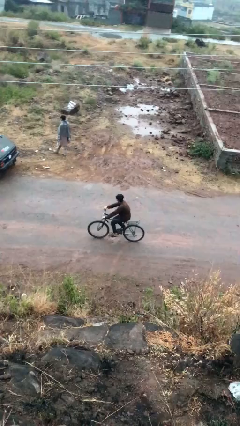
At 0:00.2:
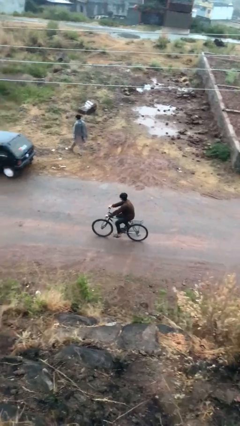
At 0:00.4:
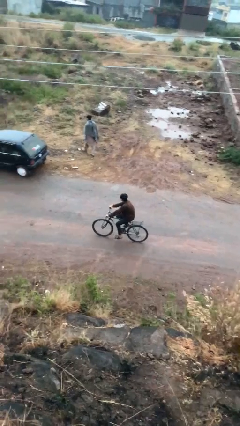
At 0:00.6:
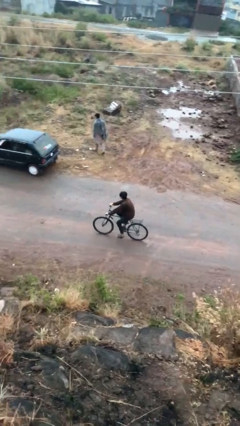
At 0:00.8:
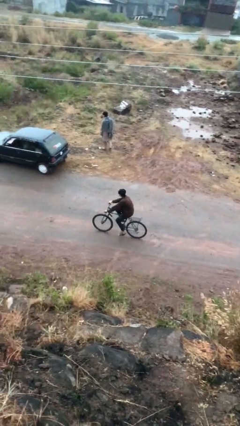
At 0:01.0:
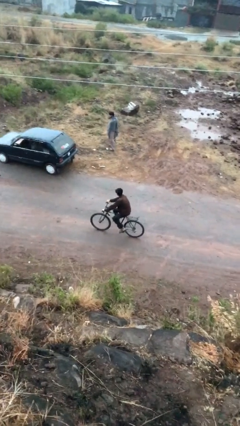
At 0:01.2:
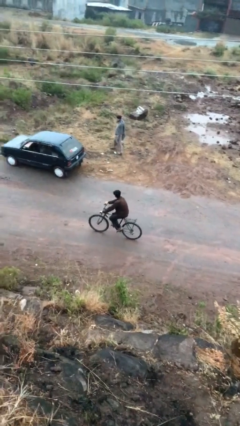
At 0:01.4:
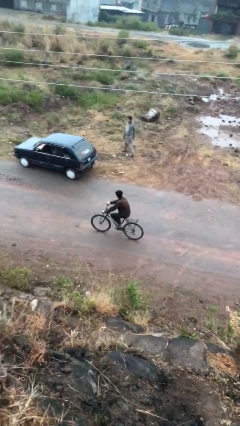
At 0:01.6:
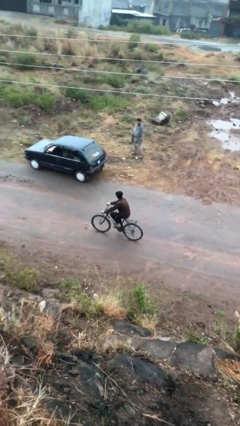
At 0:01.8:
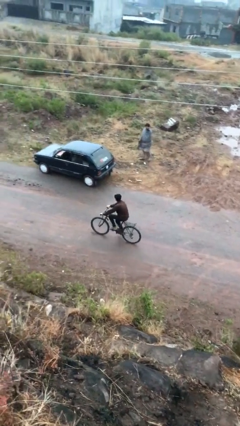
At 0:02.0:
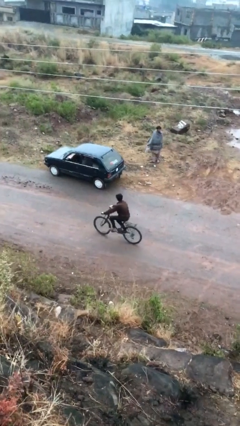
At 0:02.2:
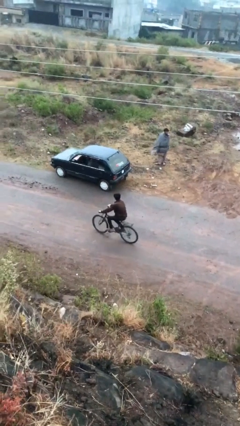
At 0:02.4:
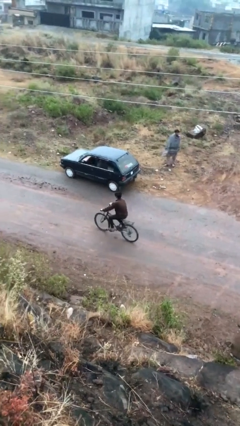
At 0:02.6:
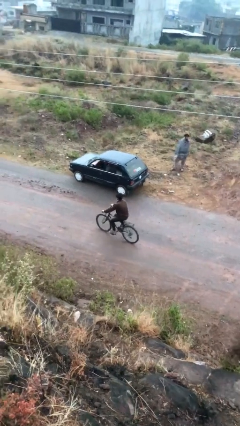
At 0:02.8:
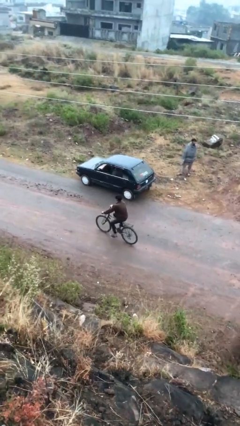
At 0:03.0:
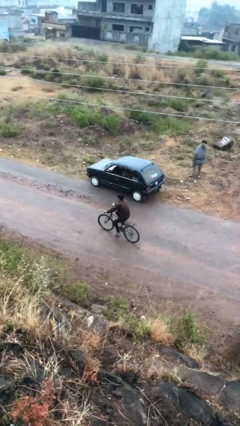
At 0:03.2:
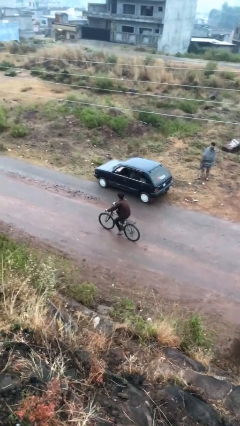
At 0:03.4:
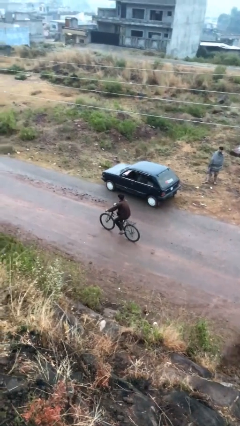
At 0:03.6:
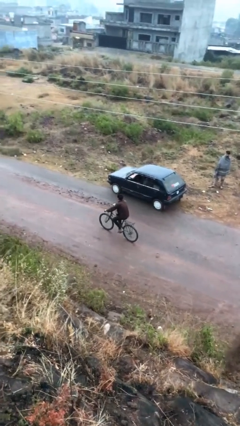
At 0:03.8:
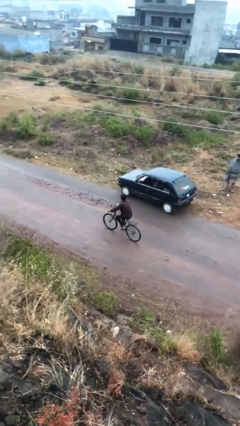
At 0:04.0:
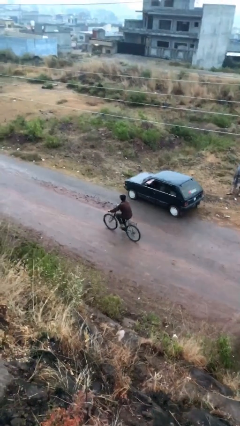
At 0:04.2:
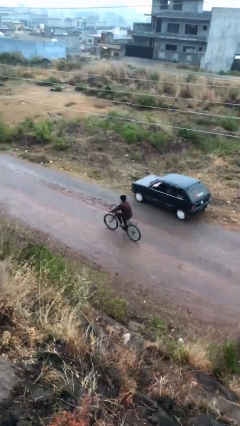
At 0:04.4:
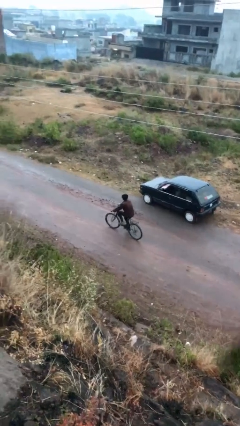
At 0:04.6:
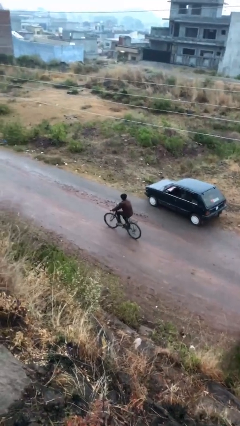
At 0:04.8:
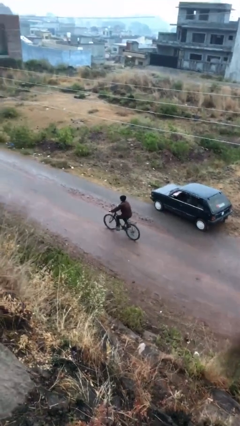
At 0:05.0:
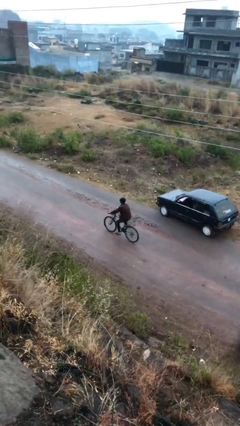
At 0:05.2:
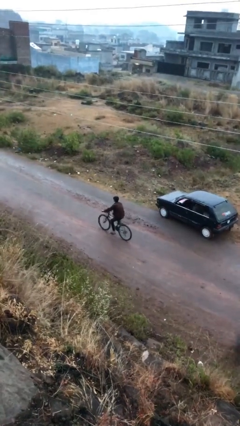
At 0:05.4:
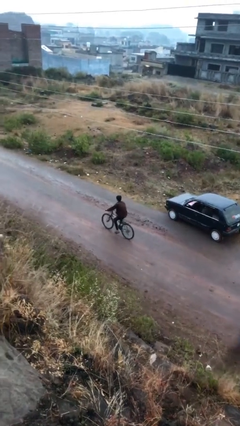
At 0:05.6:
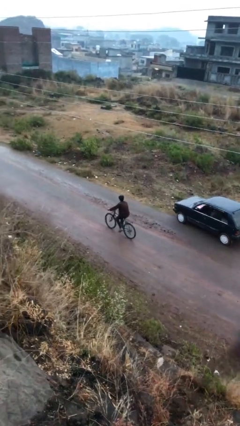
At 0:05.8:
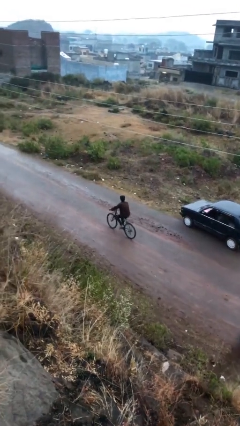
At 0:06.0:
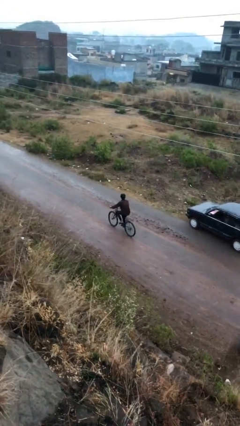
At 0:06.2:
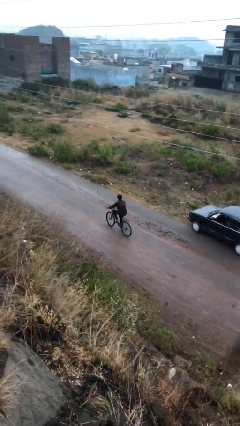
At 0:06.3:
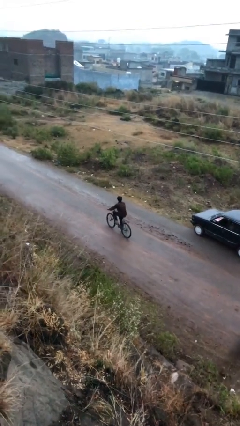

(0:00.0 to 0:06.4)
person rides bicycle

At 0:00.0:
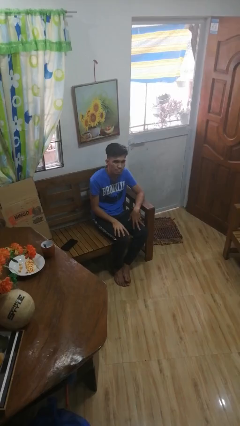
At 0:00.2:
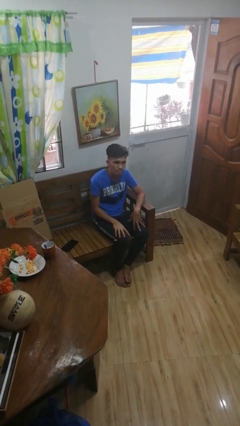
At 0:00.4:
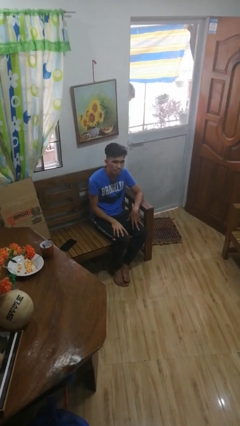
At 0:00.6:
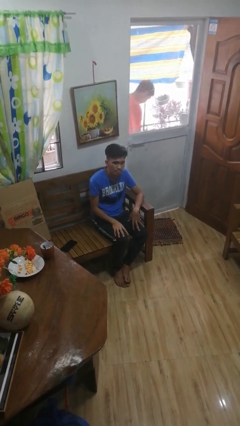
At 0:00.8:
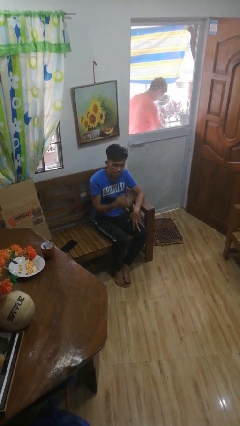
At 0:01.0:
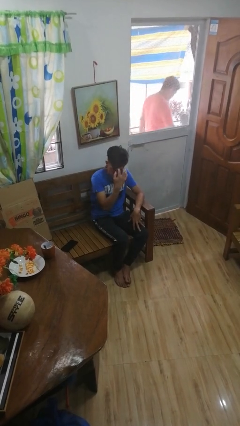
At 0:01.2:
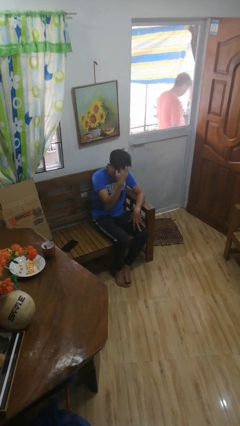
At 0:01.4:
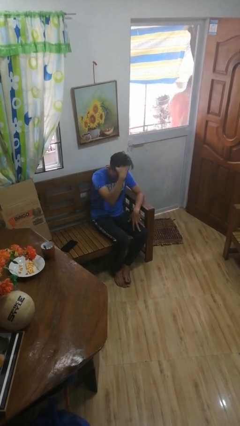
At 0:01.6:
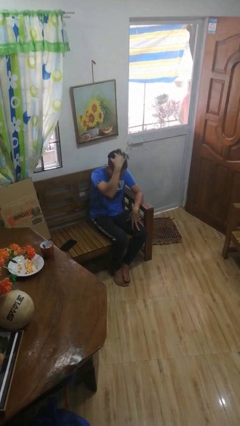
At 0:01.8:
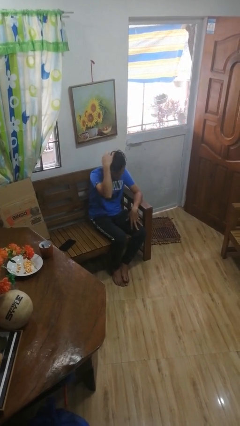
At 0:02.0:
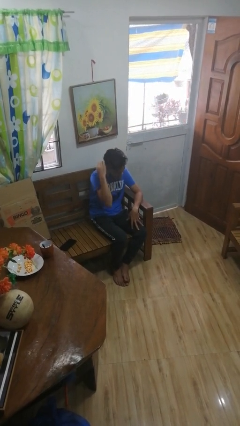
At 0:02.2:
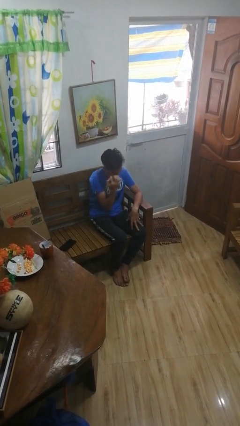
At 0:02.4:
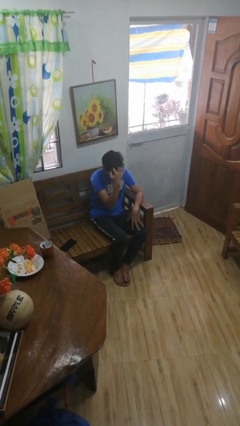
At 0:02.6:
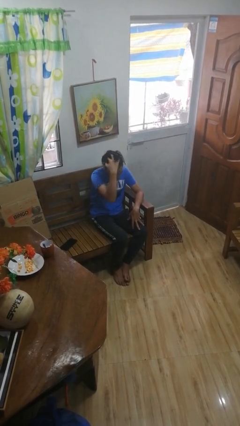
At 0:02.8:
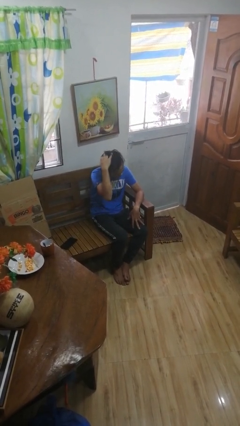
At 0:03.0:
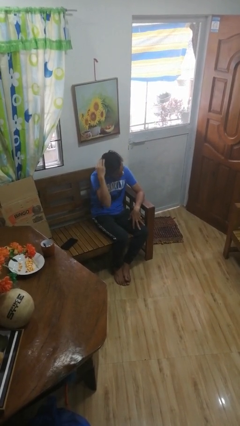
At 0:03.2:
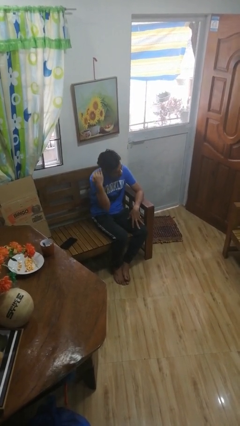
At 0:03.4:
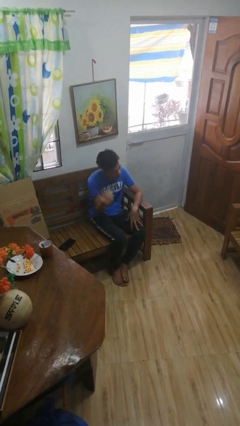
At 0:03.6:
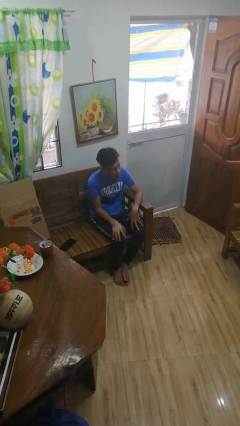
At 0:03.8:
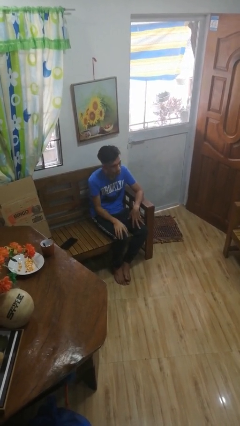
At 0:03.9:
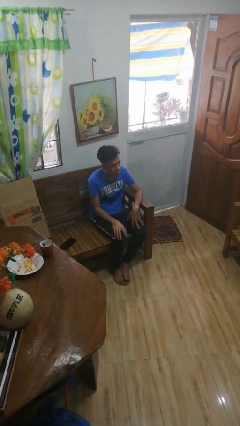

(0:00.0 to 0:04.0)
person strokes hair

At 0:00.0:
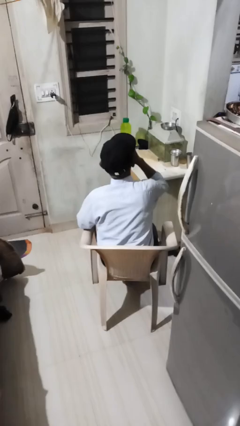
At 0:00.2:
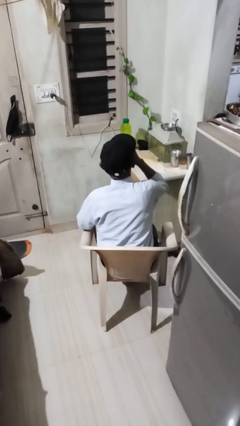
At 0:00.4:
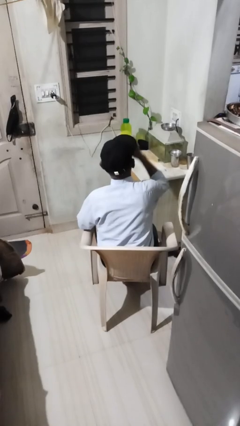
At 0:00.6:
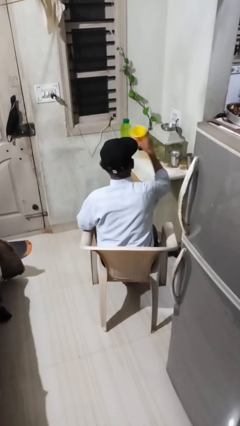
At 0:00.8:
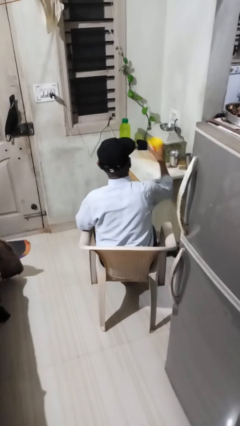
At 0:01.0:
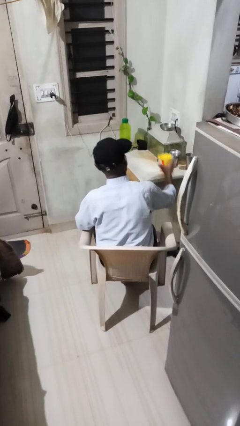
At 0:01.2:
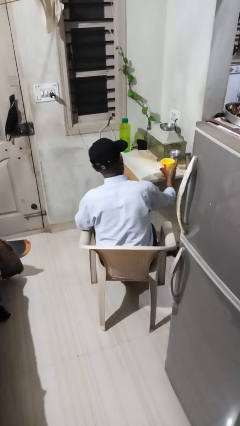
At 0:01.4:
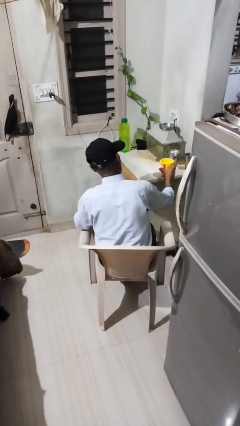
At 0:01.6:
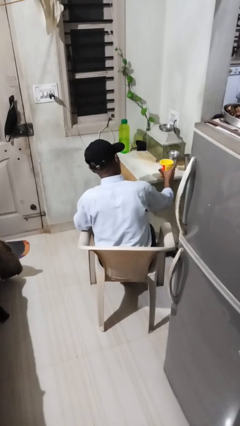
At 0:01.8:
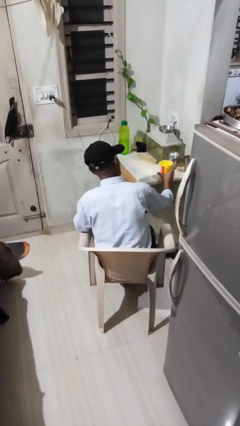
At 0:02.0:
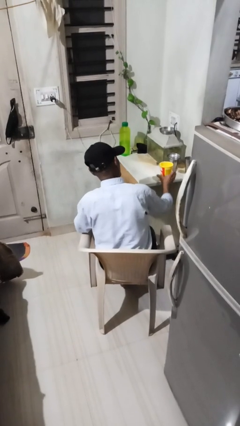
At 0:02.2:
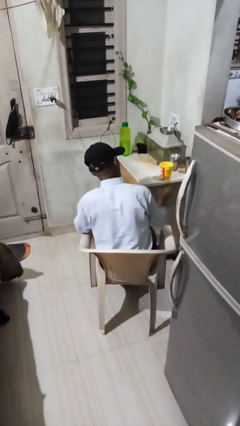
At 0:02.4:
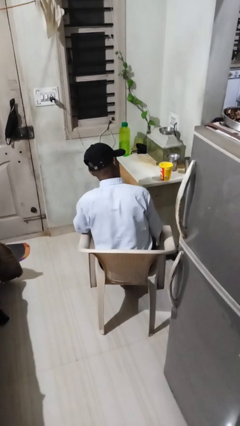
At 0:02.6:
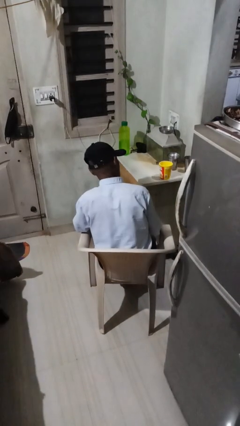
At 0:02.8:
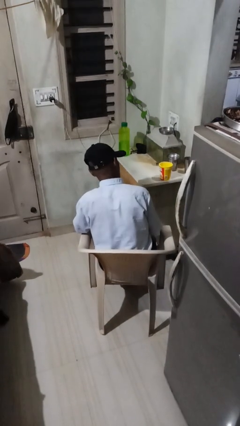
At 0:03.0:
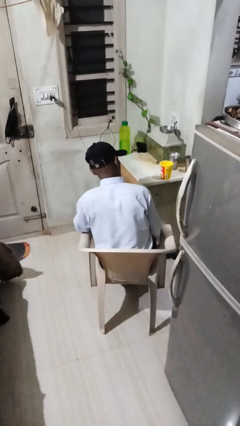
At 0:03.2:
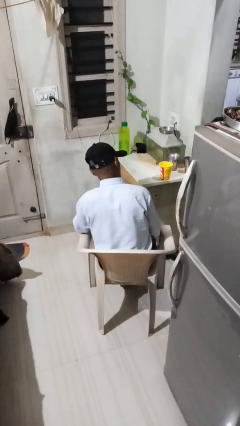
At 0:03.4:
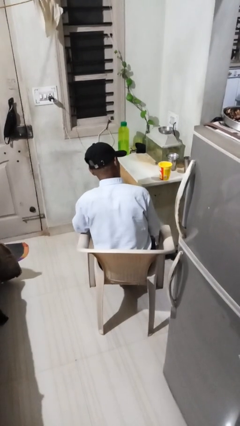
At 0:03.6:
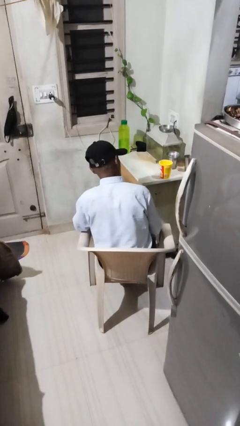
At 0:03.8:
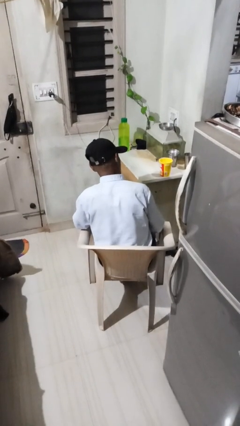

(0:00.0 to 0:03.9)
person puts down object on table

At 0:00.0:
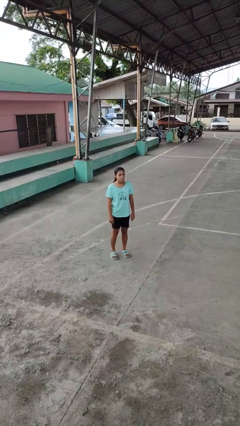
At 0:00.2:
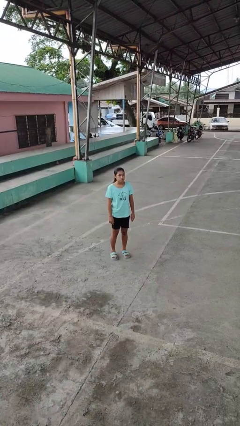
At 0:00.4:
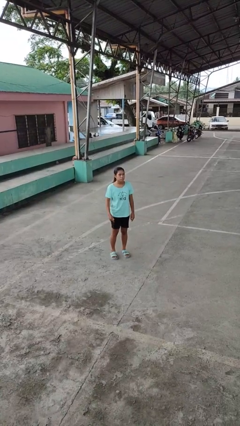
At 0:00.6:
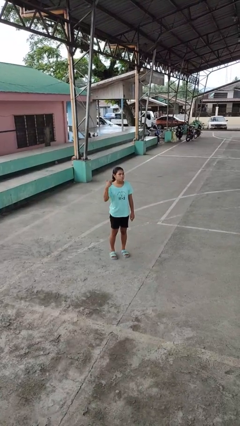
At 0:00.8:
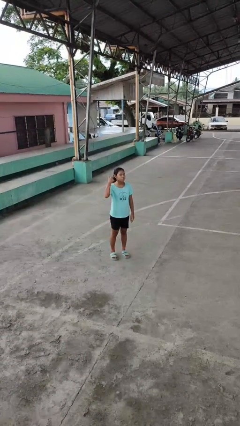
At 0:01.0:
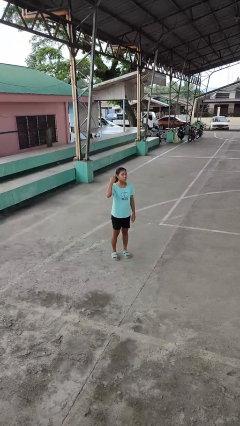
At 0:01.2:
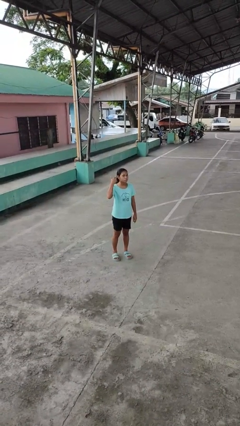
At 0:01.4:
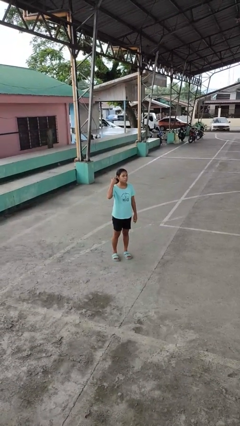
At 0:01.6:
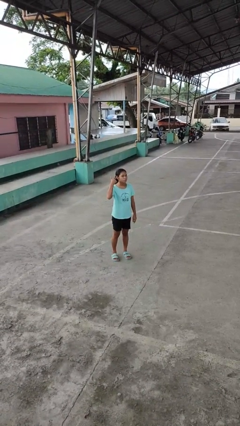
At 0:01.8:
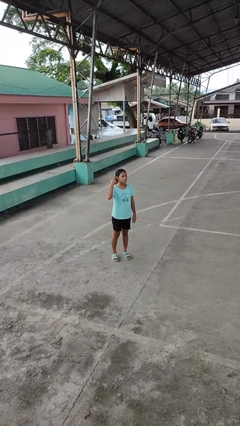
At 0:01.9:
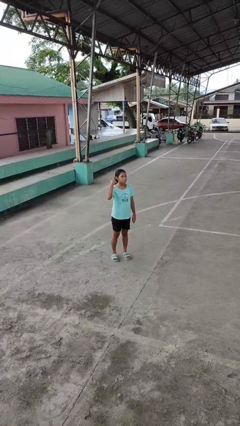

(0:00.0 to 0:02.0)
person gestures listen closely

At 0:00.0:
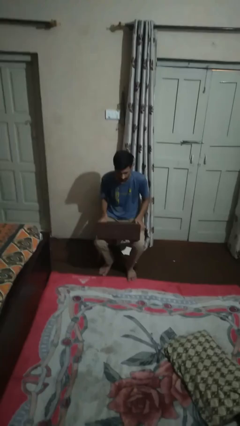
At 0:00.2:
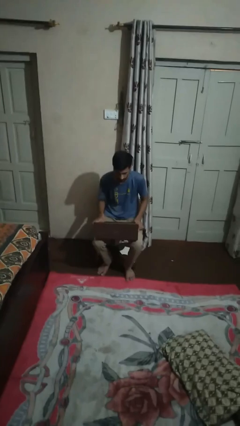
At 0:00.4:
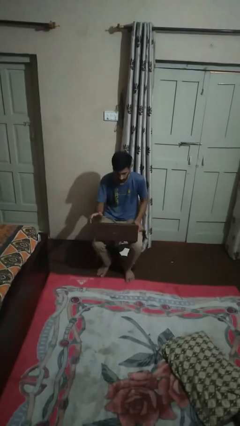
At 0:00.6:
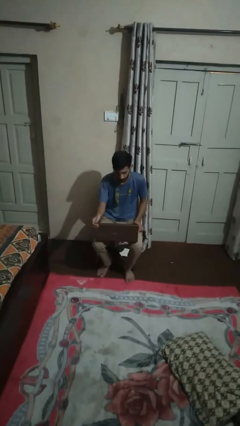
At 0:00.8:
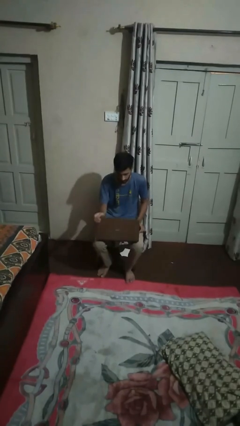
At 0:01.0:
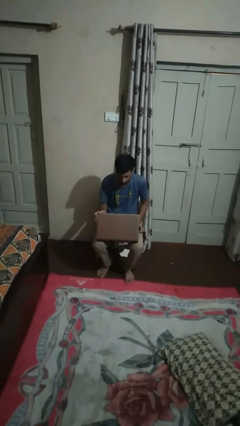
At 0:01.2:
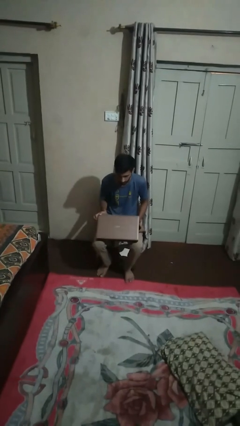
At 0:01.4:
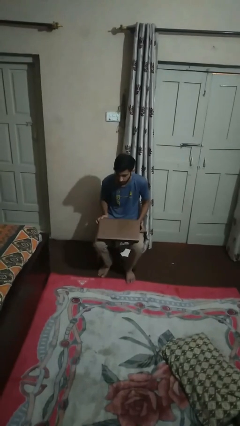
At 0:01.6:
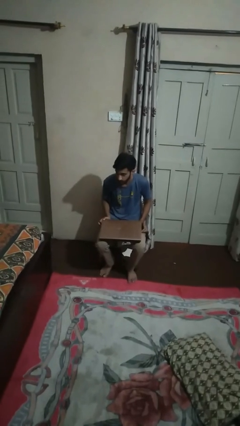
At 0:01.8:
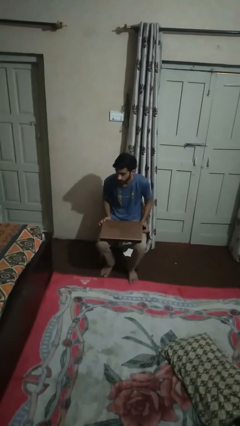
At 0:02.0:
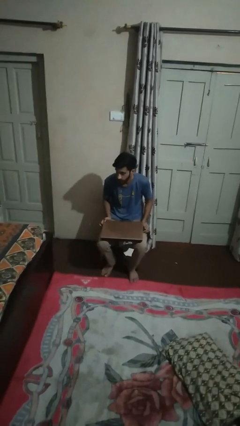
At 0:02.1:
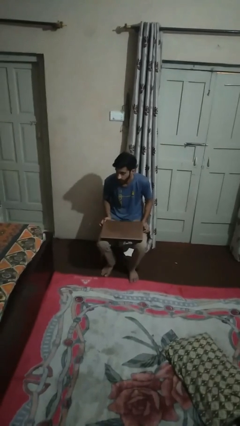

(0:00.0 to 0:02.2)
person closes laptop
